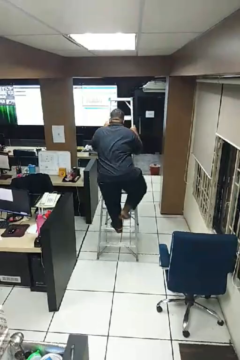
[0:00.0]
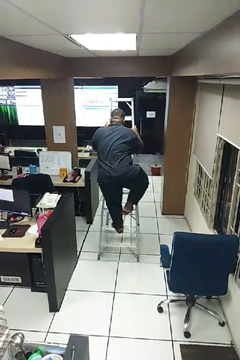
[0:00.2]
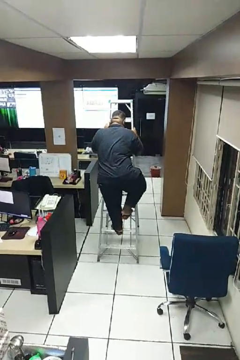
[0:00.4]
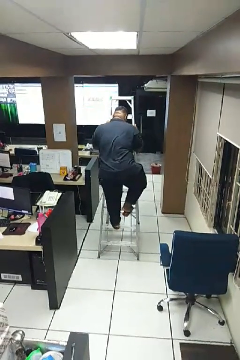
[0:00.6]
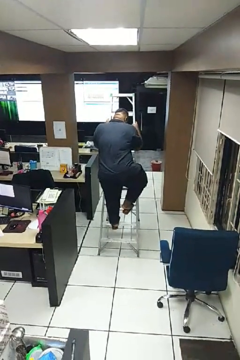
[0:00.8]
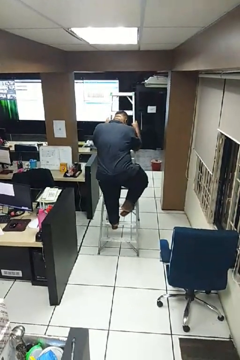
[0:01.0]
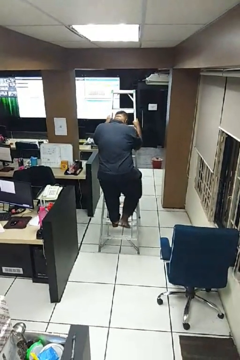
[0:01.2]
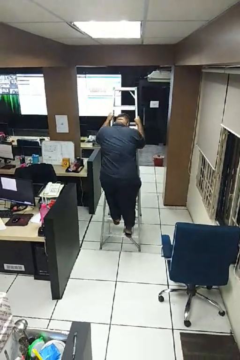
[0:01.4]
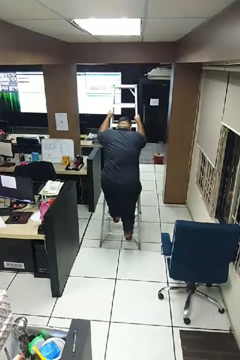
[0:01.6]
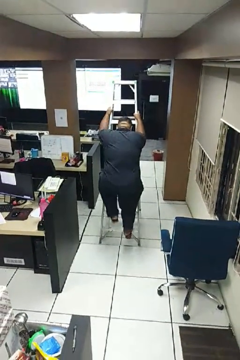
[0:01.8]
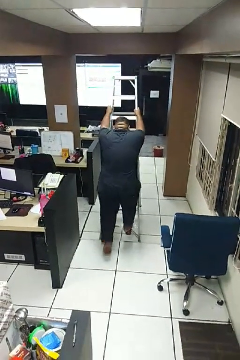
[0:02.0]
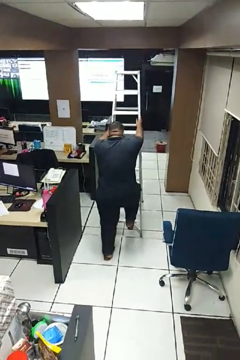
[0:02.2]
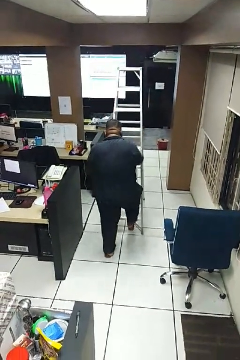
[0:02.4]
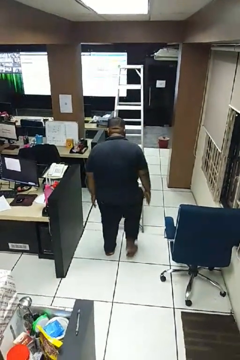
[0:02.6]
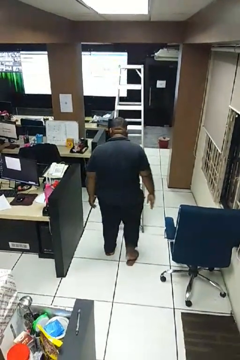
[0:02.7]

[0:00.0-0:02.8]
person climbs down ladder

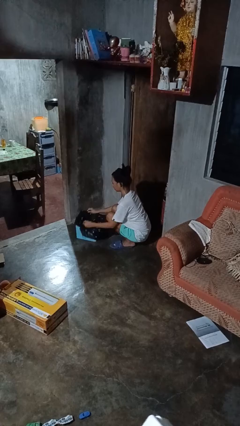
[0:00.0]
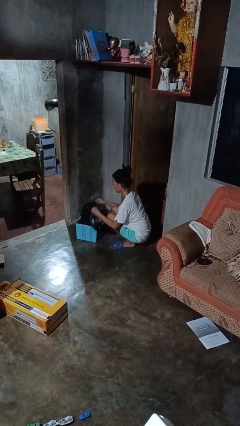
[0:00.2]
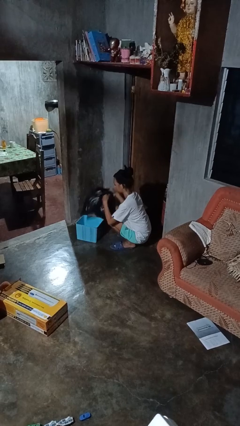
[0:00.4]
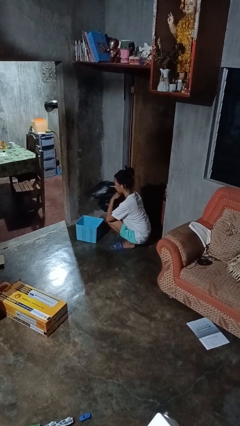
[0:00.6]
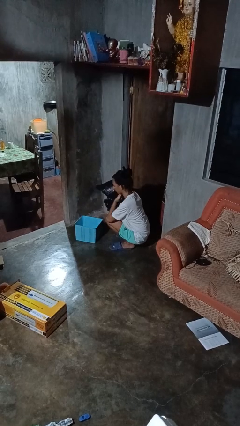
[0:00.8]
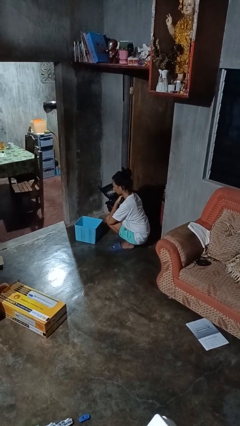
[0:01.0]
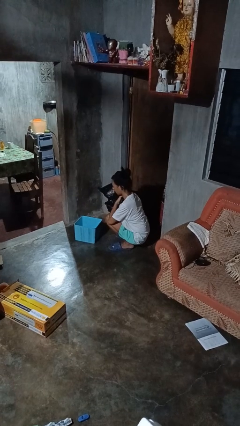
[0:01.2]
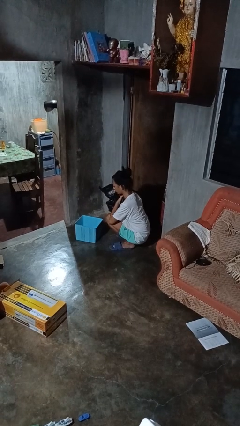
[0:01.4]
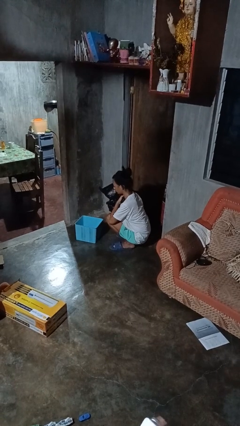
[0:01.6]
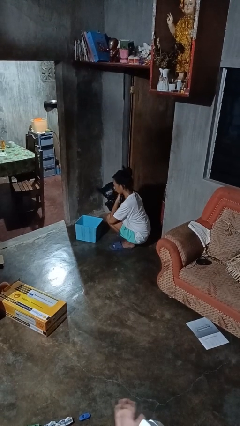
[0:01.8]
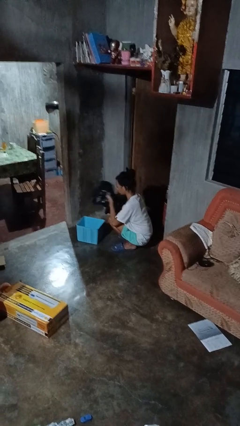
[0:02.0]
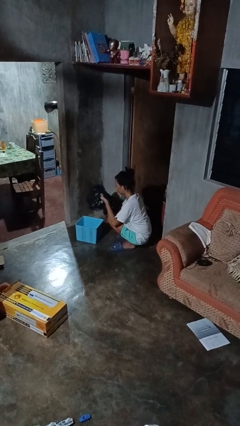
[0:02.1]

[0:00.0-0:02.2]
person removes trashbag from trashcan

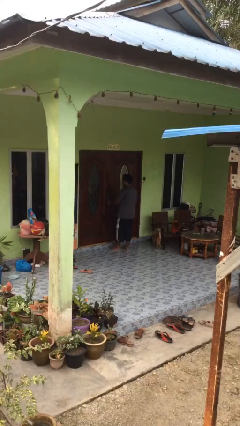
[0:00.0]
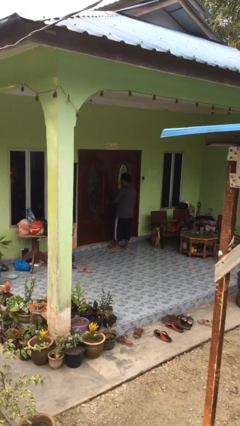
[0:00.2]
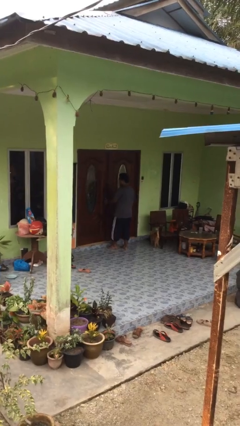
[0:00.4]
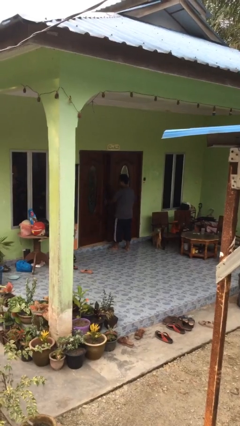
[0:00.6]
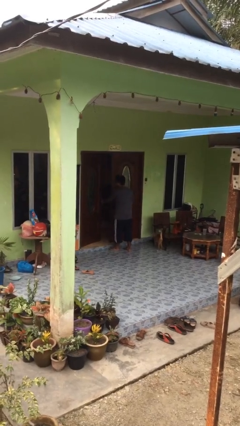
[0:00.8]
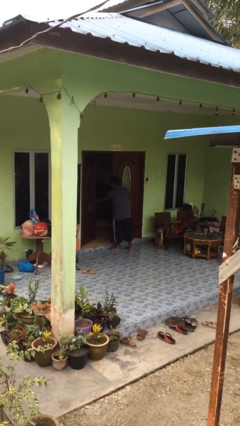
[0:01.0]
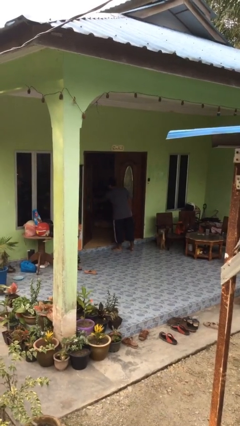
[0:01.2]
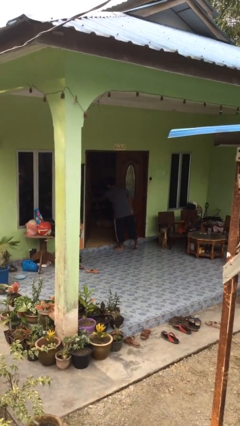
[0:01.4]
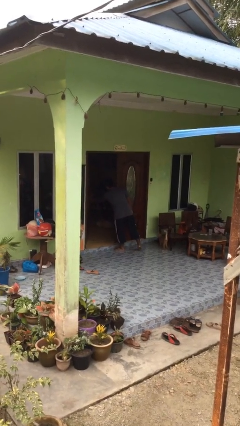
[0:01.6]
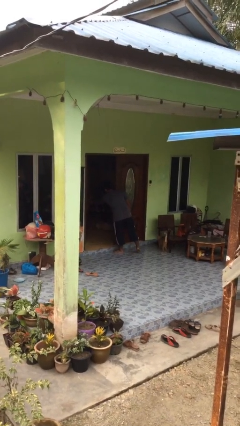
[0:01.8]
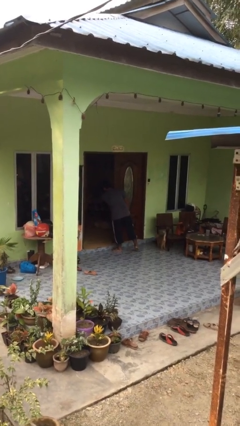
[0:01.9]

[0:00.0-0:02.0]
person opens facility door

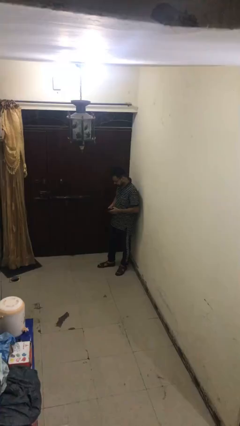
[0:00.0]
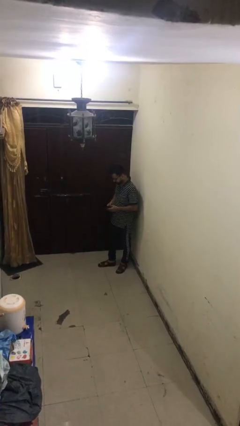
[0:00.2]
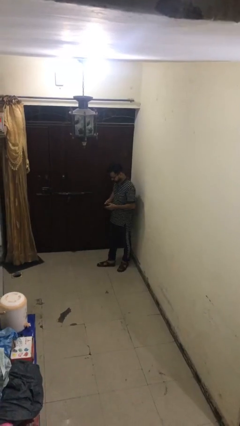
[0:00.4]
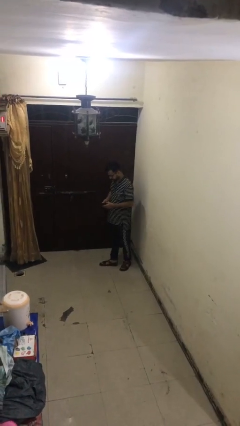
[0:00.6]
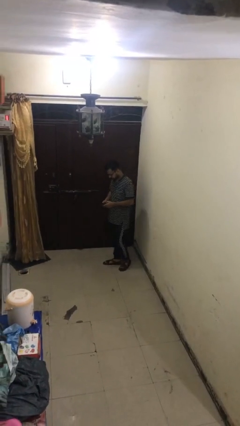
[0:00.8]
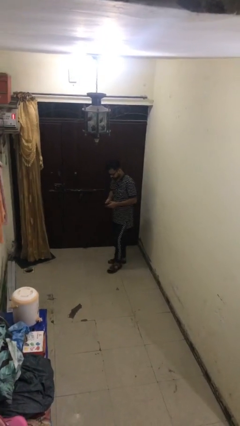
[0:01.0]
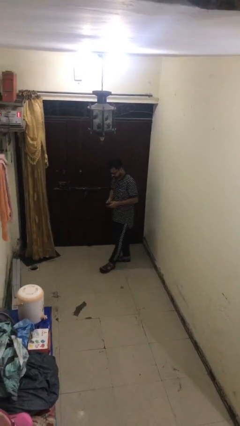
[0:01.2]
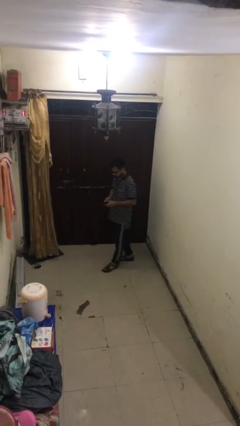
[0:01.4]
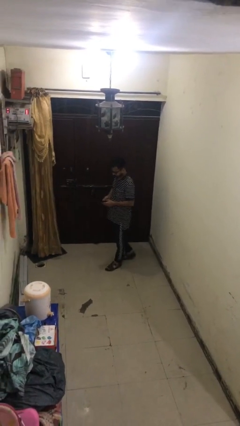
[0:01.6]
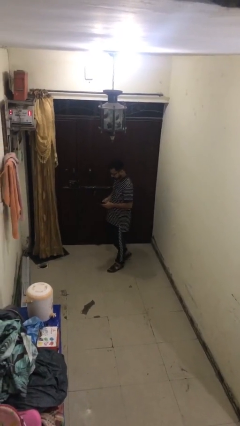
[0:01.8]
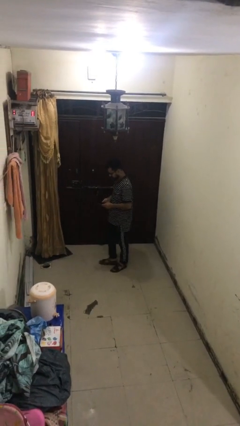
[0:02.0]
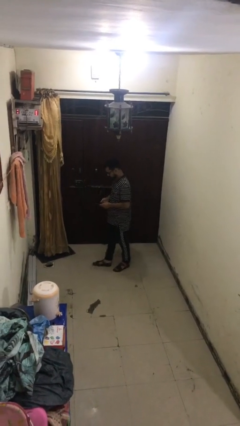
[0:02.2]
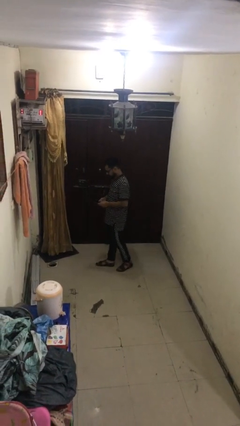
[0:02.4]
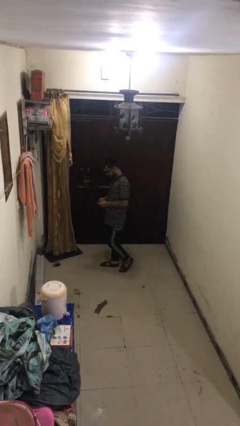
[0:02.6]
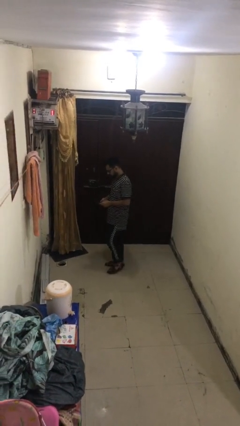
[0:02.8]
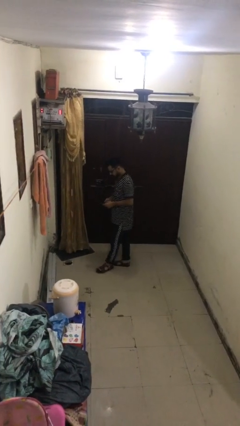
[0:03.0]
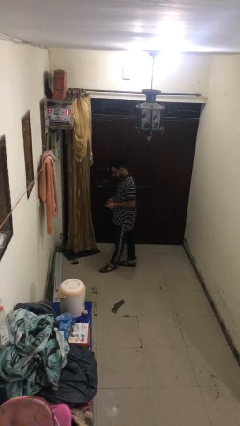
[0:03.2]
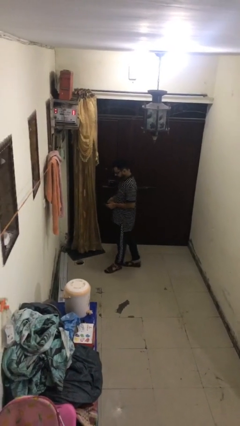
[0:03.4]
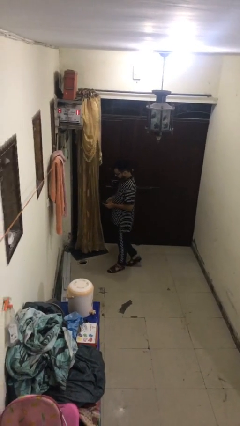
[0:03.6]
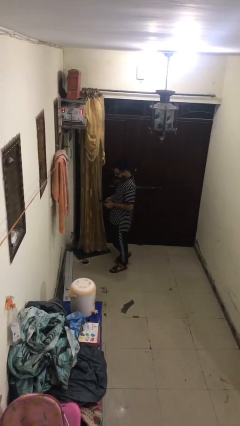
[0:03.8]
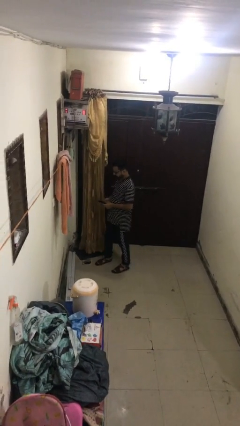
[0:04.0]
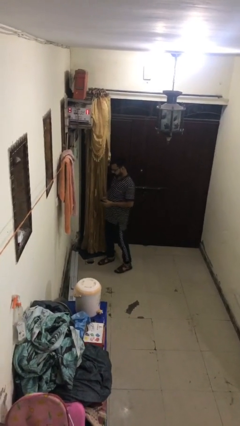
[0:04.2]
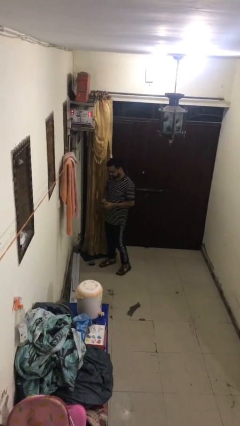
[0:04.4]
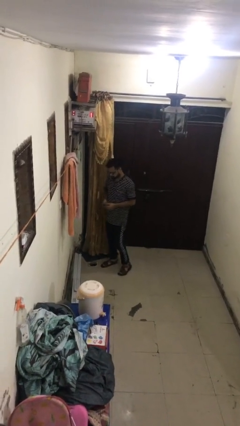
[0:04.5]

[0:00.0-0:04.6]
person texts on phone

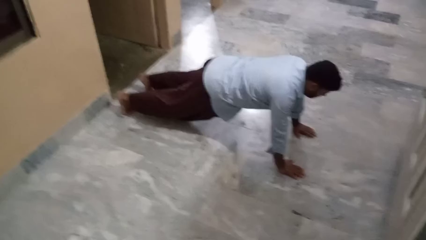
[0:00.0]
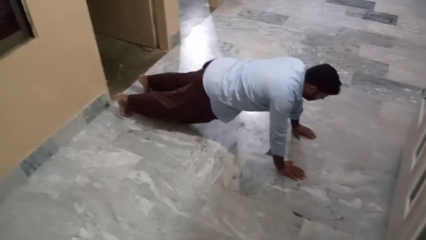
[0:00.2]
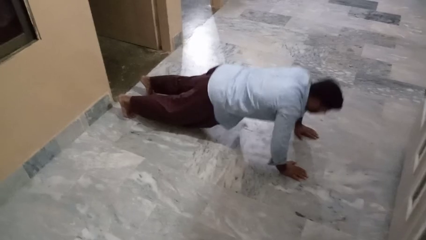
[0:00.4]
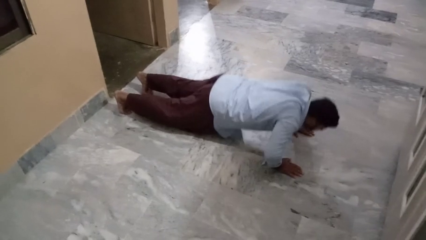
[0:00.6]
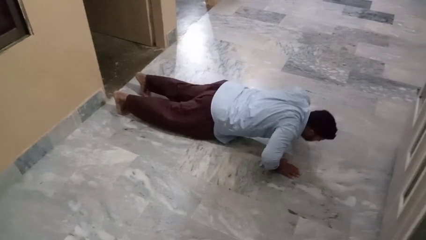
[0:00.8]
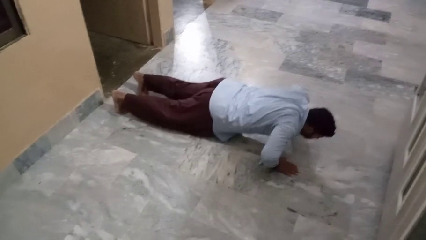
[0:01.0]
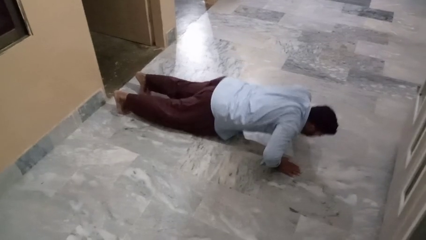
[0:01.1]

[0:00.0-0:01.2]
person exercises with pushup

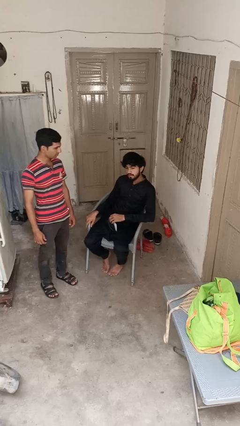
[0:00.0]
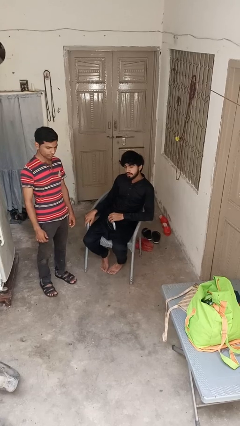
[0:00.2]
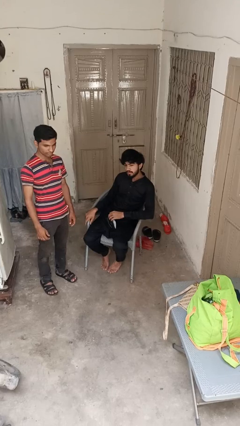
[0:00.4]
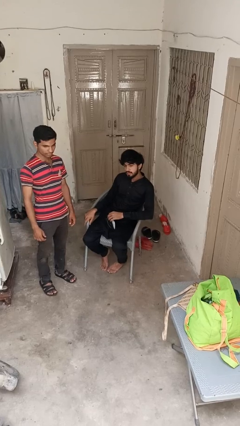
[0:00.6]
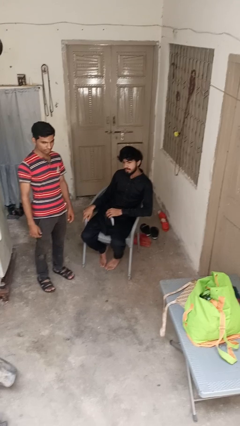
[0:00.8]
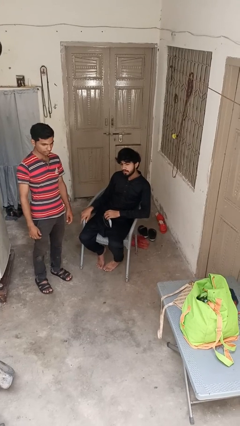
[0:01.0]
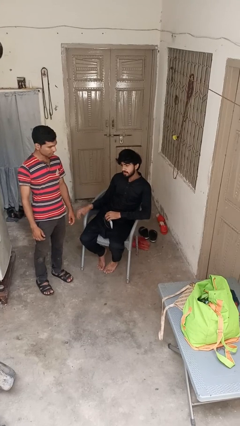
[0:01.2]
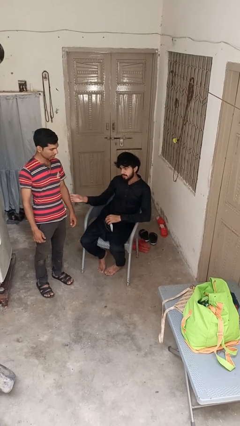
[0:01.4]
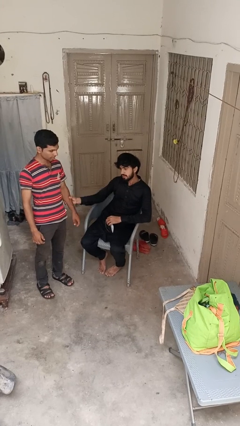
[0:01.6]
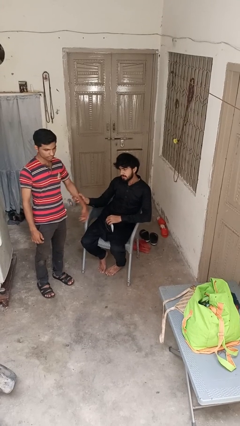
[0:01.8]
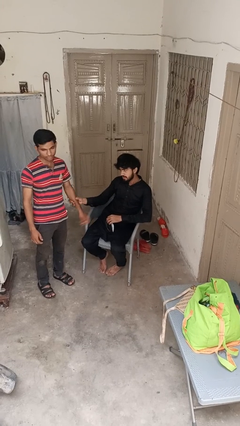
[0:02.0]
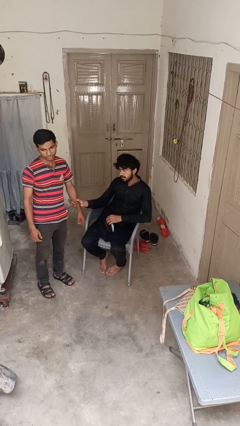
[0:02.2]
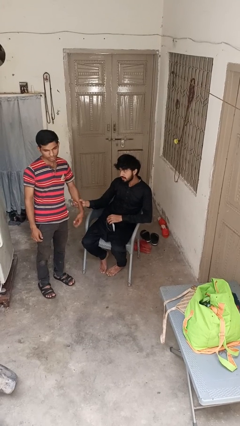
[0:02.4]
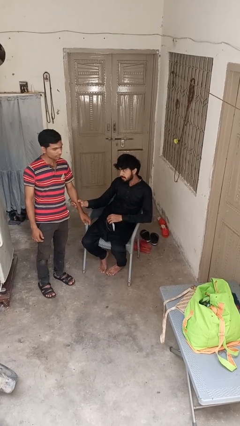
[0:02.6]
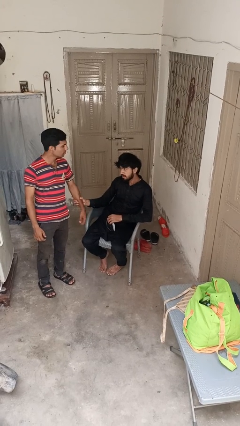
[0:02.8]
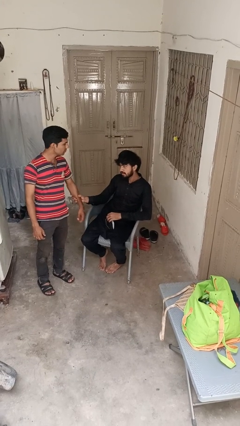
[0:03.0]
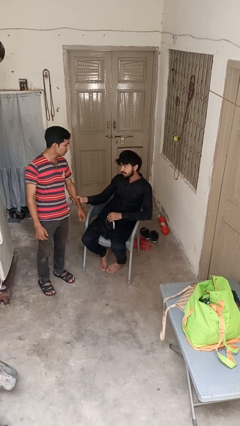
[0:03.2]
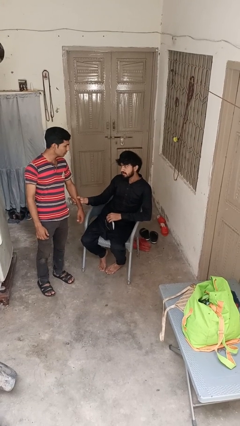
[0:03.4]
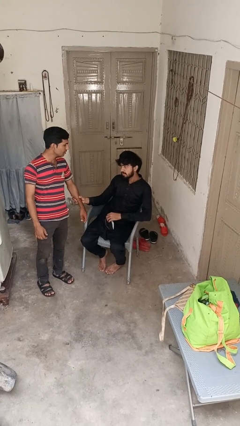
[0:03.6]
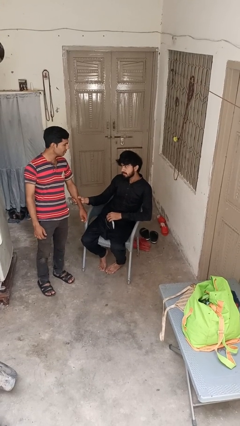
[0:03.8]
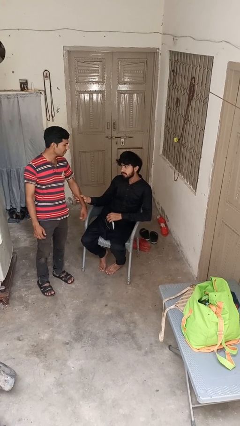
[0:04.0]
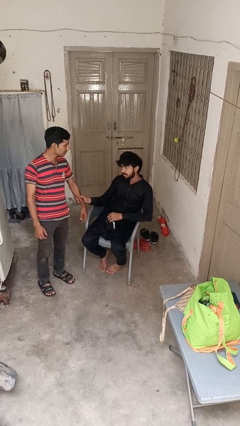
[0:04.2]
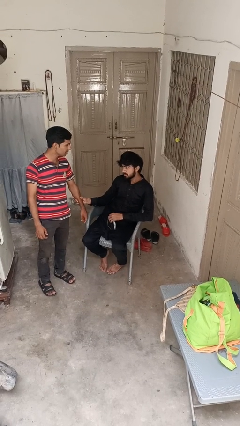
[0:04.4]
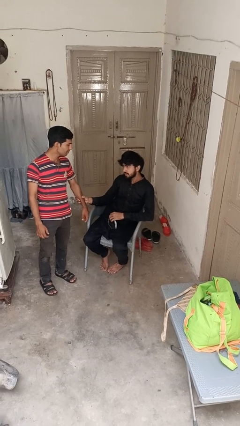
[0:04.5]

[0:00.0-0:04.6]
person grabs person by forearm

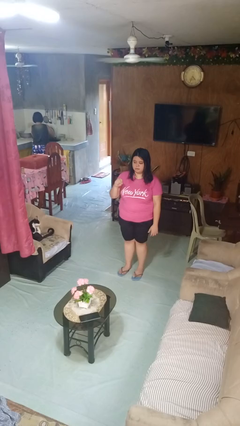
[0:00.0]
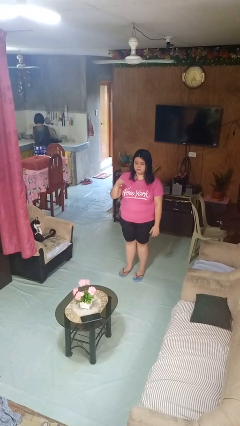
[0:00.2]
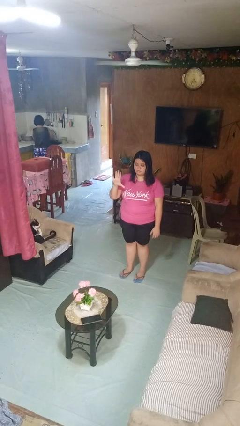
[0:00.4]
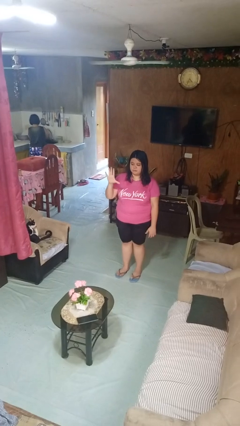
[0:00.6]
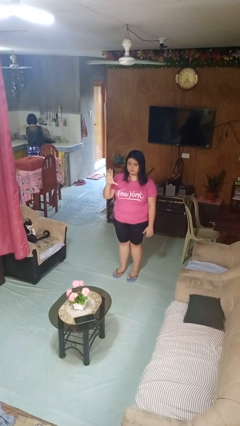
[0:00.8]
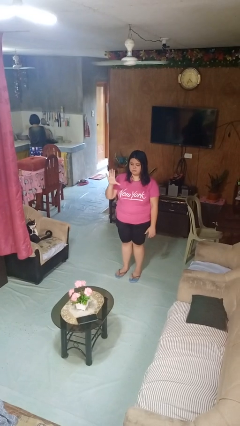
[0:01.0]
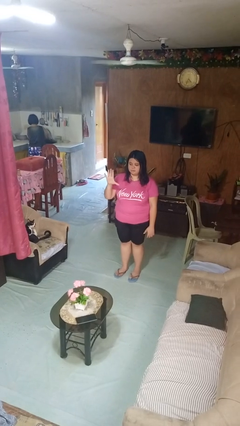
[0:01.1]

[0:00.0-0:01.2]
person gestures zoom in
